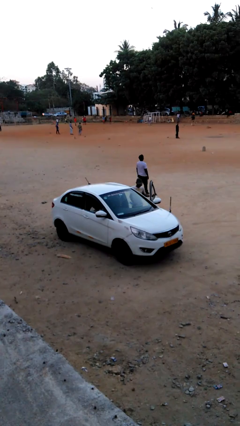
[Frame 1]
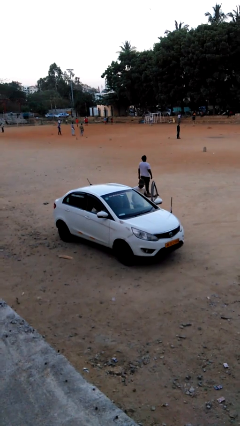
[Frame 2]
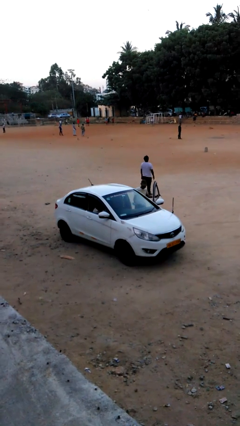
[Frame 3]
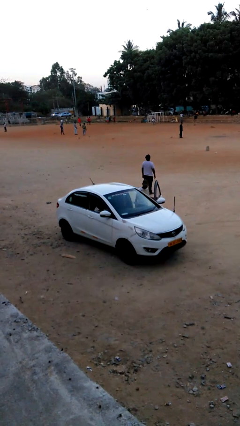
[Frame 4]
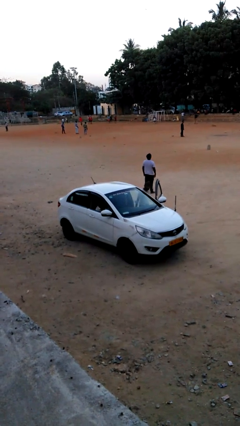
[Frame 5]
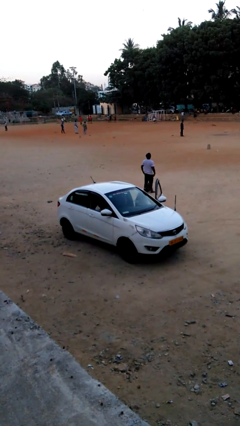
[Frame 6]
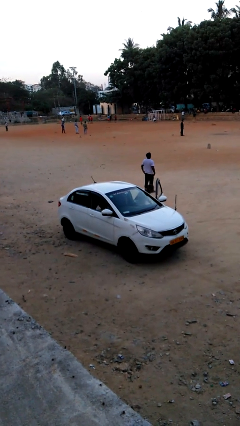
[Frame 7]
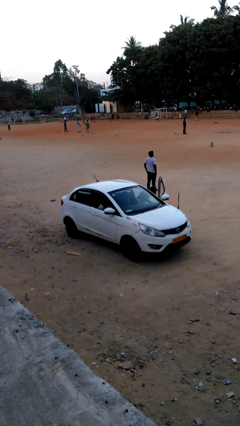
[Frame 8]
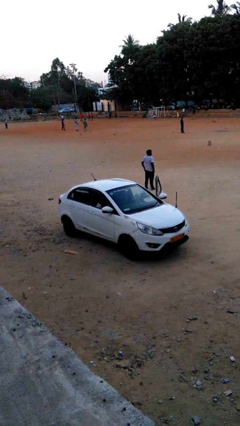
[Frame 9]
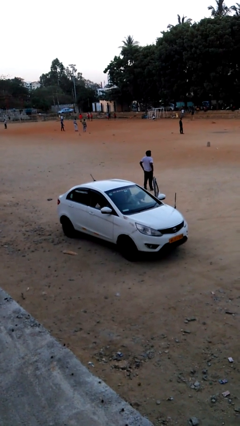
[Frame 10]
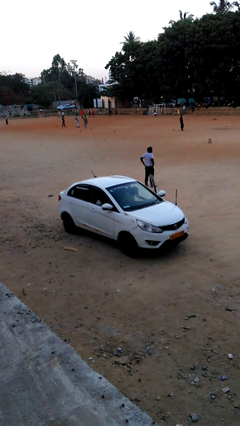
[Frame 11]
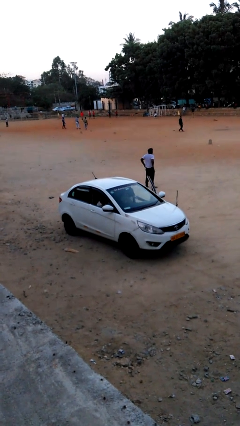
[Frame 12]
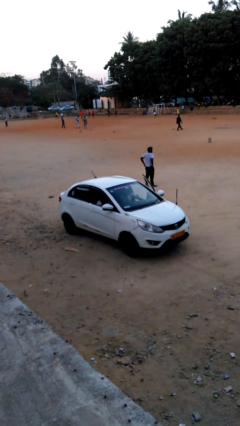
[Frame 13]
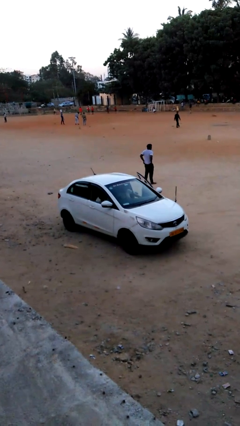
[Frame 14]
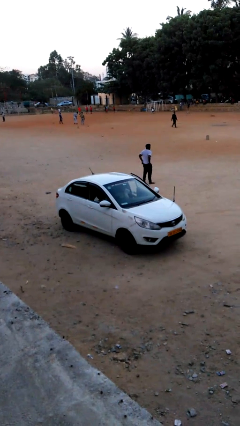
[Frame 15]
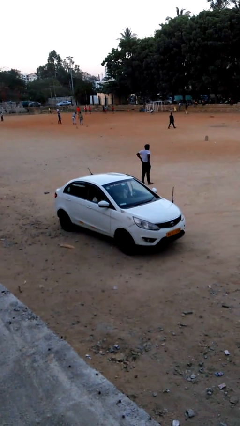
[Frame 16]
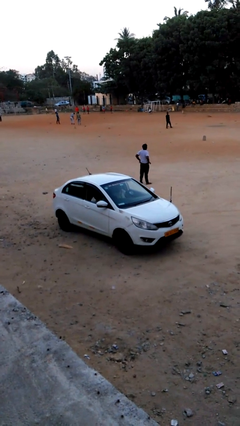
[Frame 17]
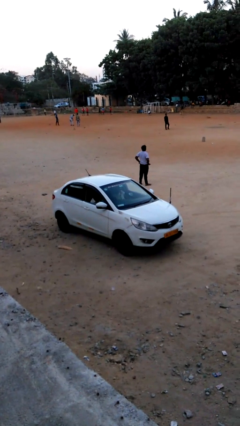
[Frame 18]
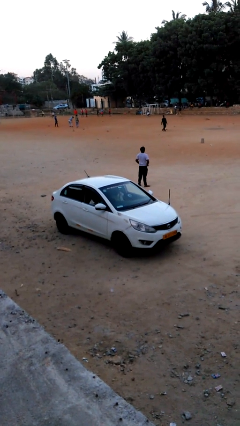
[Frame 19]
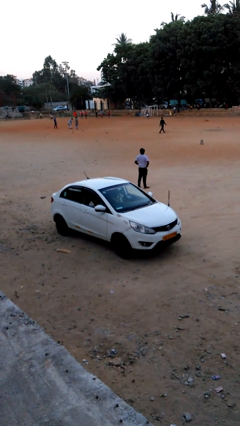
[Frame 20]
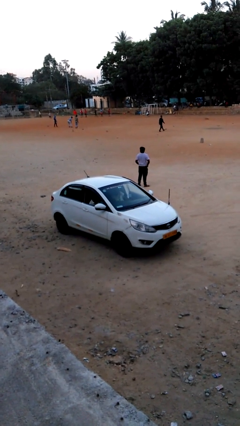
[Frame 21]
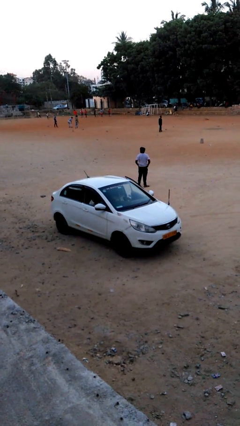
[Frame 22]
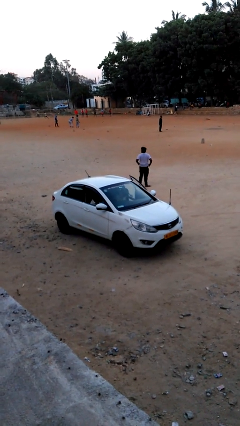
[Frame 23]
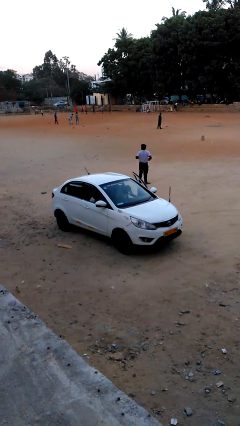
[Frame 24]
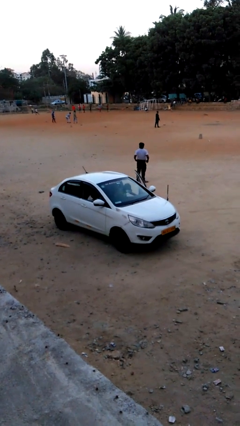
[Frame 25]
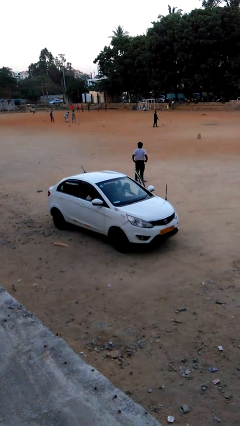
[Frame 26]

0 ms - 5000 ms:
car picks up person

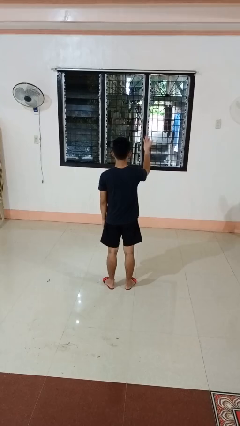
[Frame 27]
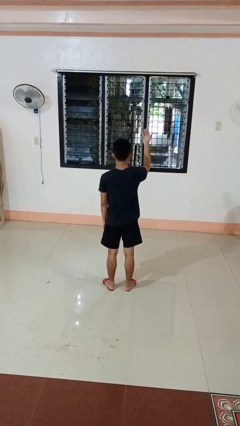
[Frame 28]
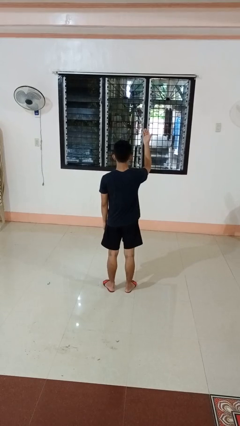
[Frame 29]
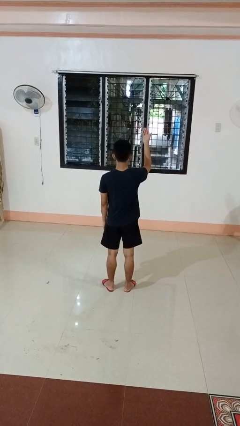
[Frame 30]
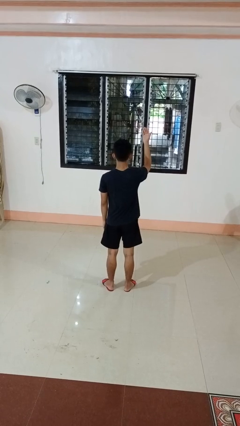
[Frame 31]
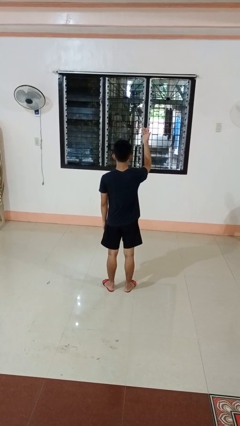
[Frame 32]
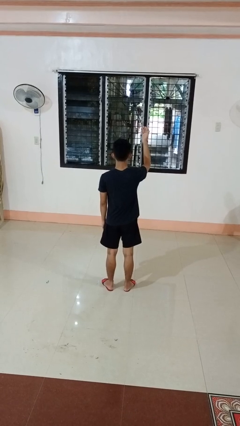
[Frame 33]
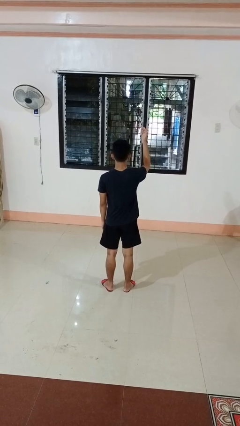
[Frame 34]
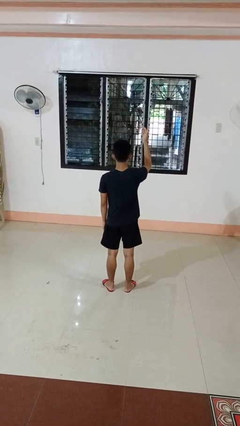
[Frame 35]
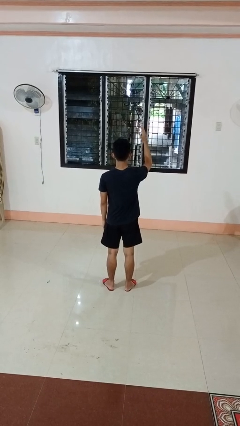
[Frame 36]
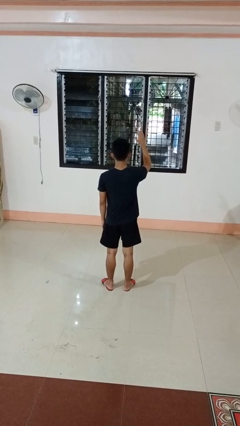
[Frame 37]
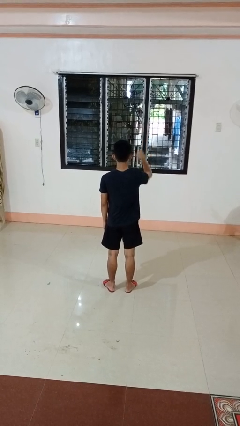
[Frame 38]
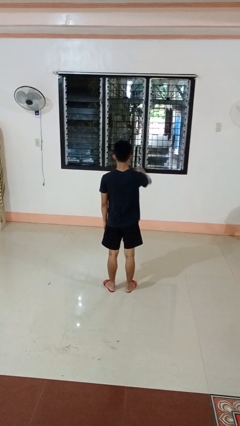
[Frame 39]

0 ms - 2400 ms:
person gestures swipe up

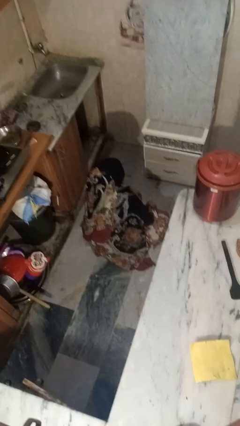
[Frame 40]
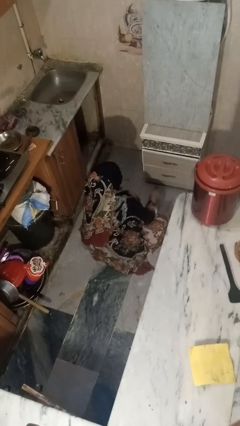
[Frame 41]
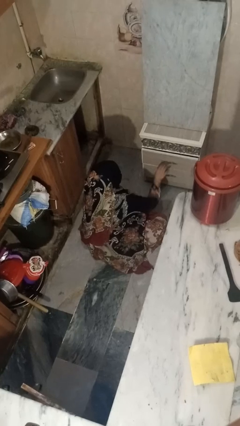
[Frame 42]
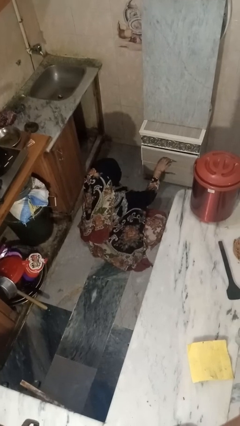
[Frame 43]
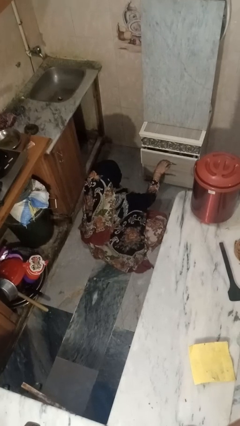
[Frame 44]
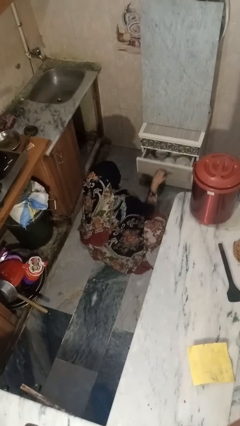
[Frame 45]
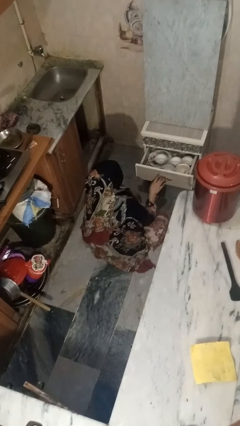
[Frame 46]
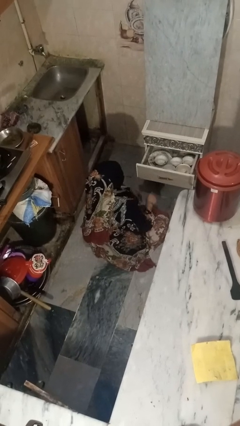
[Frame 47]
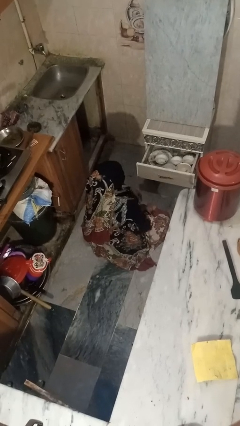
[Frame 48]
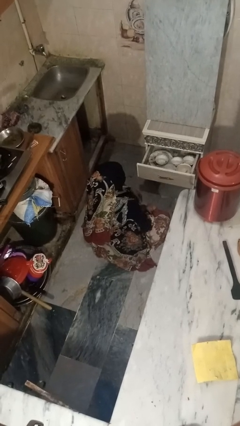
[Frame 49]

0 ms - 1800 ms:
person opens kitchen drawer

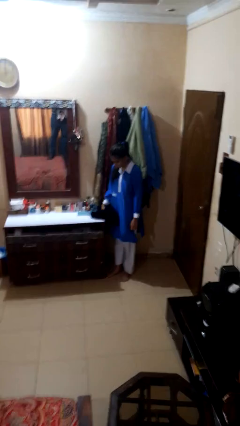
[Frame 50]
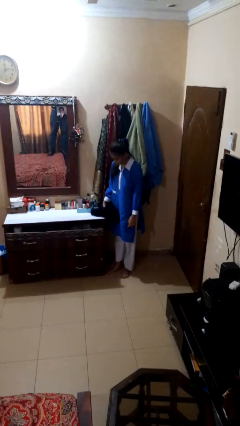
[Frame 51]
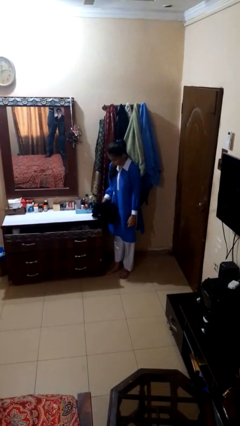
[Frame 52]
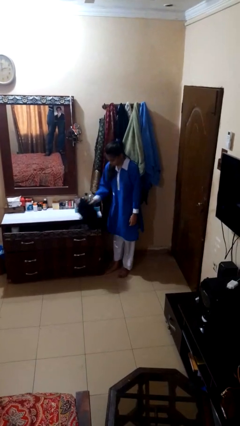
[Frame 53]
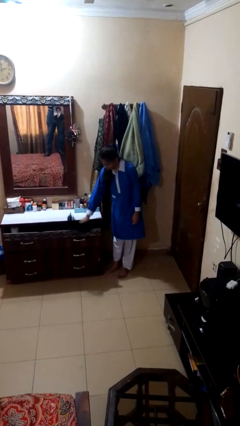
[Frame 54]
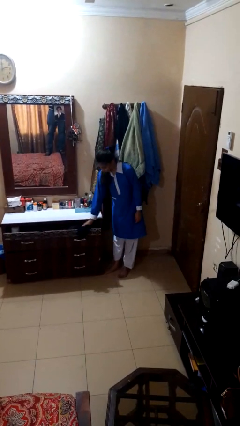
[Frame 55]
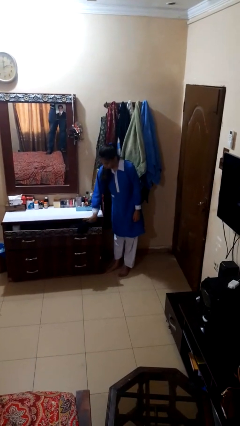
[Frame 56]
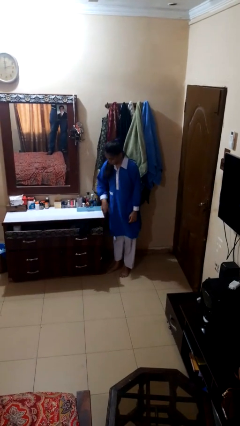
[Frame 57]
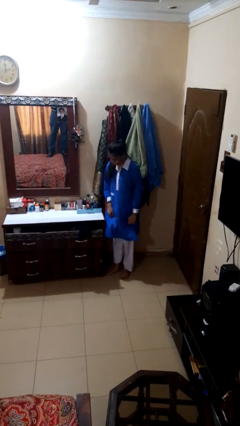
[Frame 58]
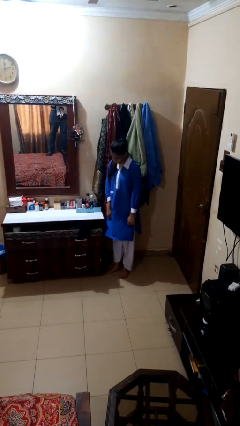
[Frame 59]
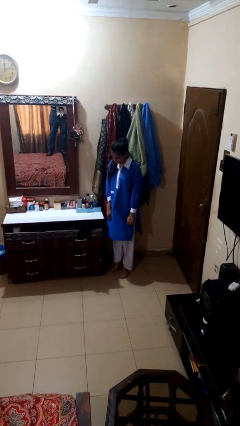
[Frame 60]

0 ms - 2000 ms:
person puts clothes into dresser

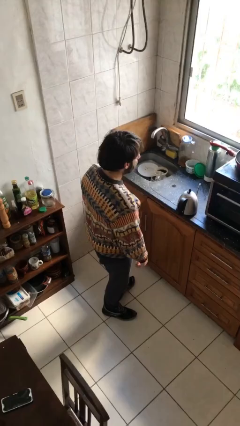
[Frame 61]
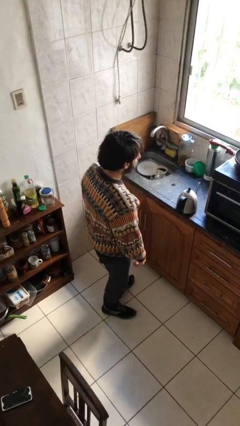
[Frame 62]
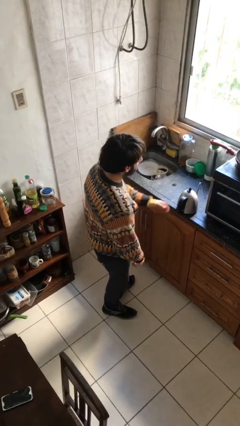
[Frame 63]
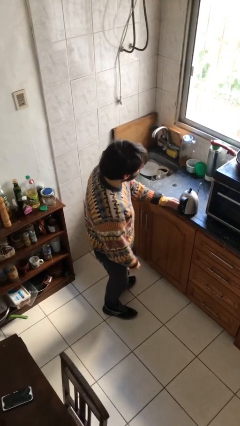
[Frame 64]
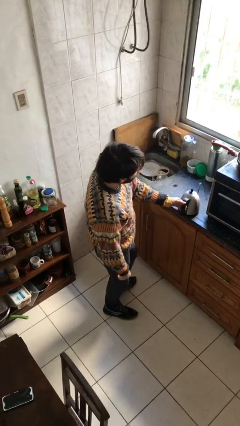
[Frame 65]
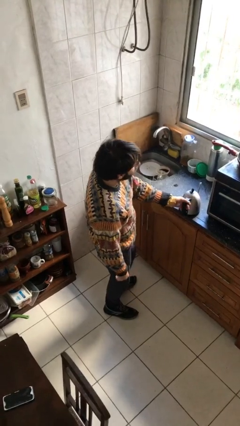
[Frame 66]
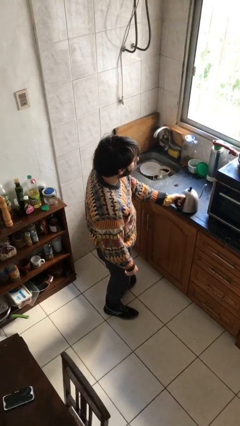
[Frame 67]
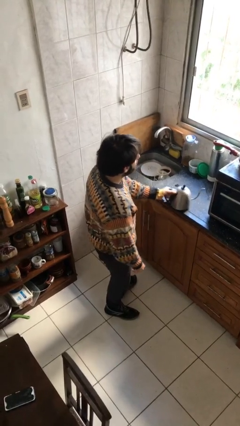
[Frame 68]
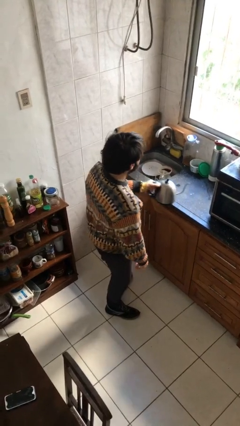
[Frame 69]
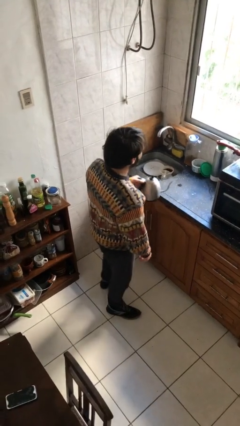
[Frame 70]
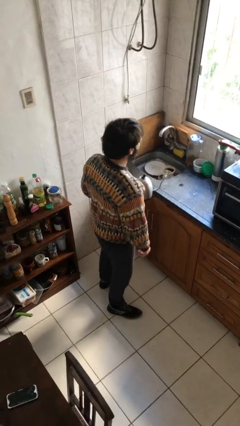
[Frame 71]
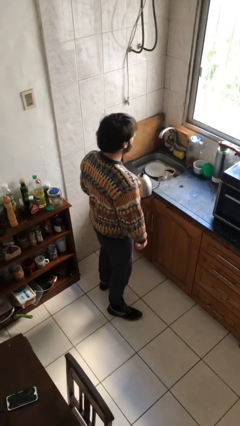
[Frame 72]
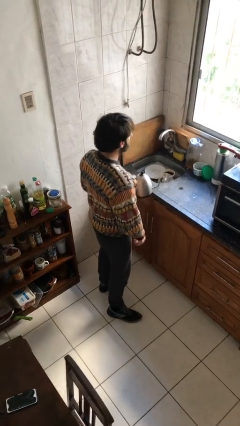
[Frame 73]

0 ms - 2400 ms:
person picks up object from countertop

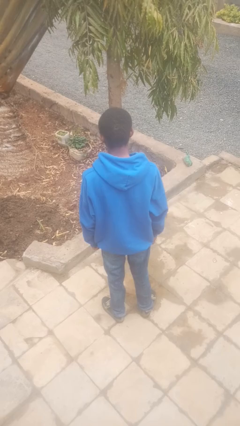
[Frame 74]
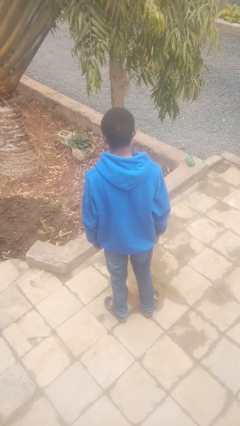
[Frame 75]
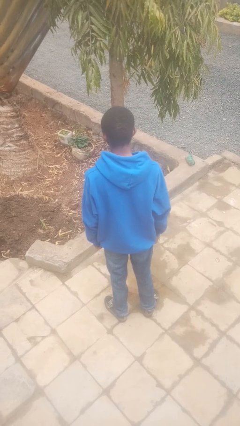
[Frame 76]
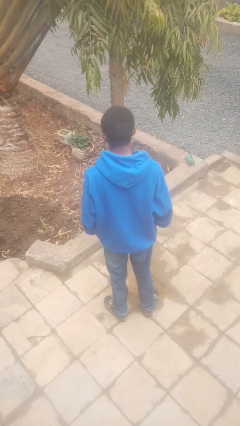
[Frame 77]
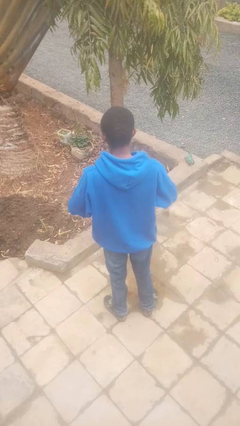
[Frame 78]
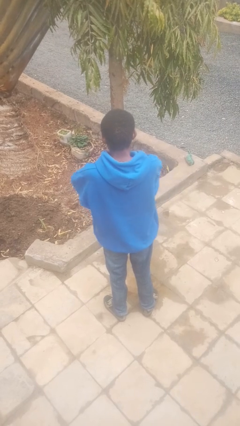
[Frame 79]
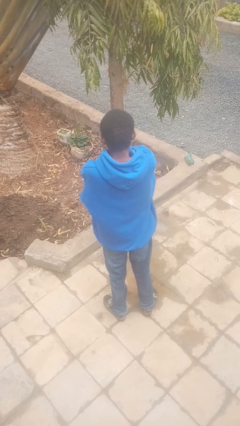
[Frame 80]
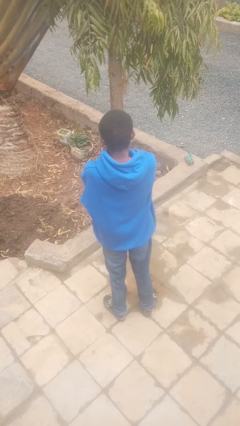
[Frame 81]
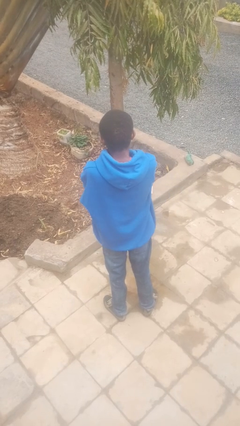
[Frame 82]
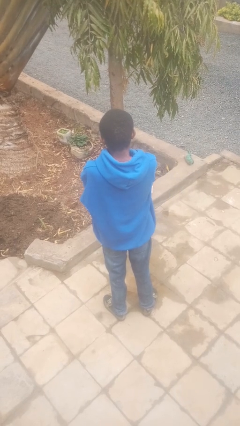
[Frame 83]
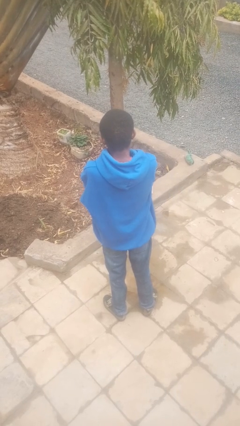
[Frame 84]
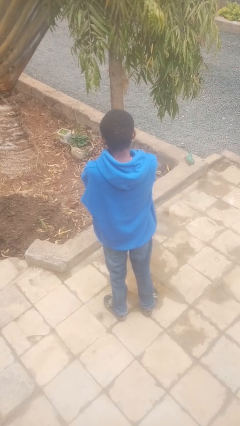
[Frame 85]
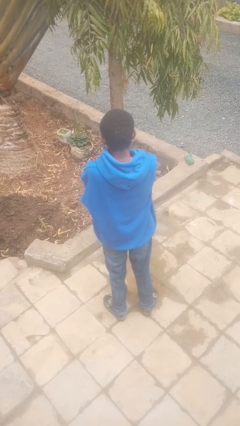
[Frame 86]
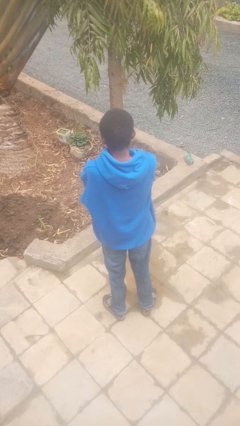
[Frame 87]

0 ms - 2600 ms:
person crosses arms

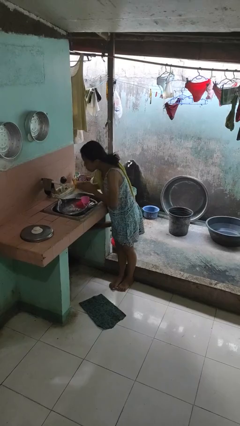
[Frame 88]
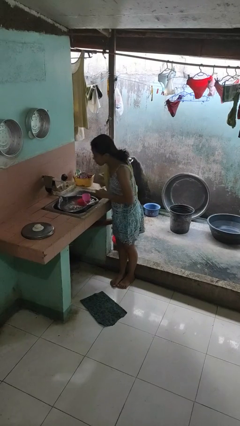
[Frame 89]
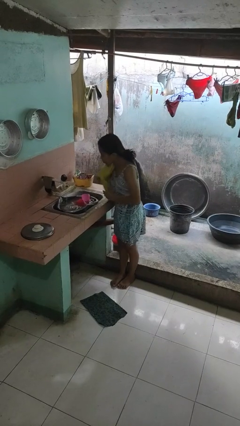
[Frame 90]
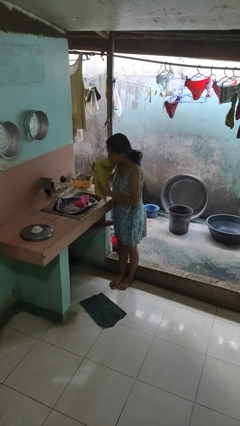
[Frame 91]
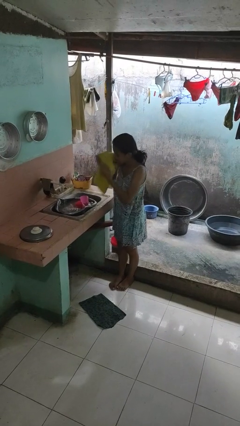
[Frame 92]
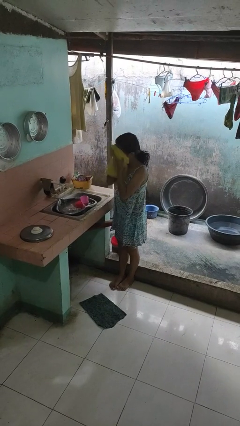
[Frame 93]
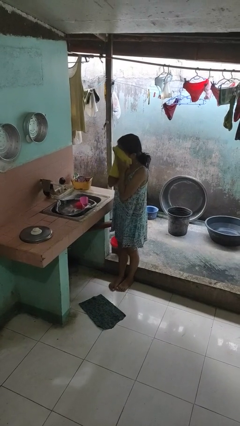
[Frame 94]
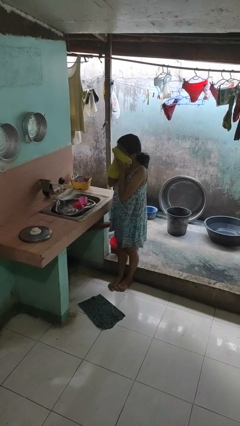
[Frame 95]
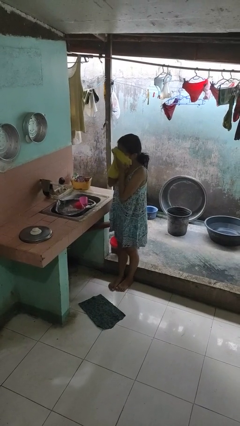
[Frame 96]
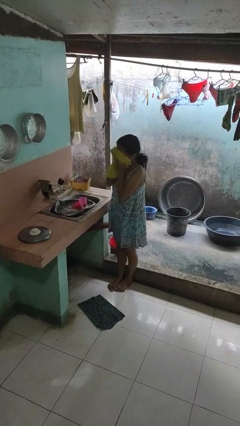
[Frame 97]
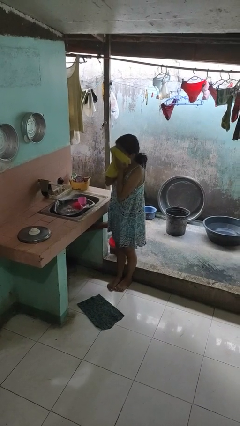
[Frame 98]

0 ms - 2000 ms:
person dries face with towel
